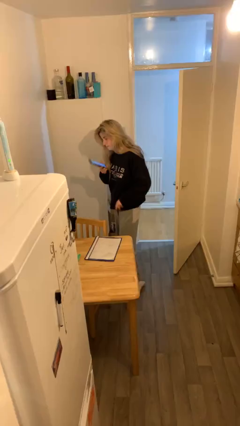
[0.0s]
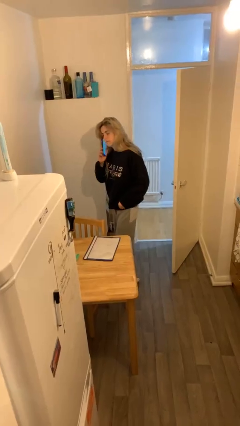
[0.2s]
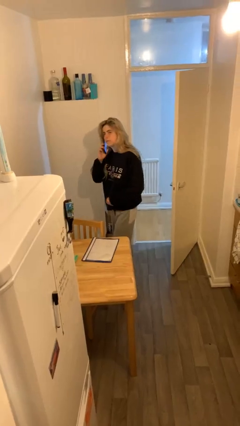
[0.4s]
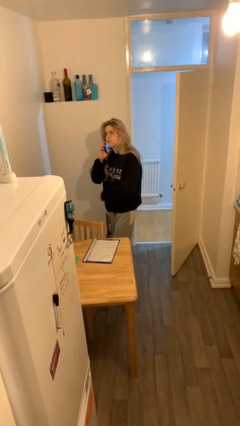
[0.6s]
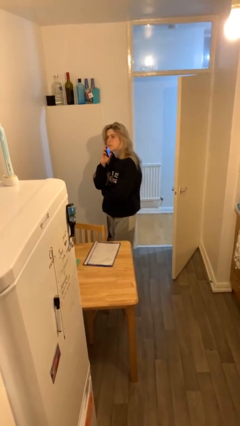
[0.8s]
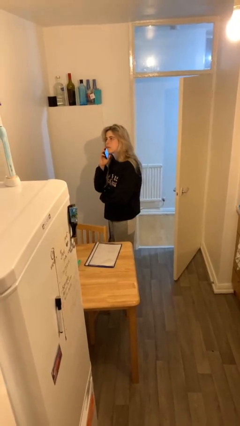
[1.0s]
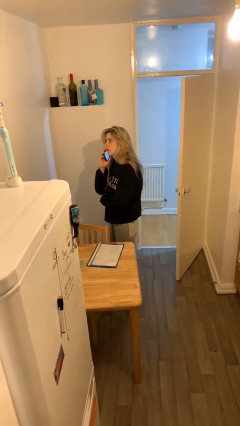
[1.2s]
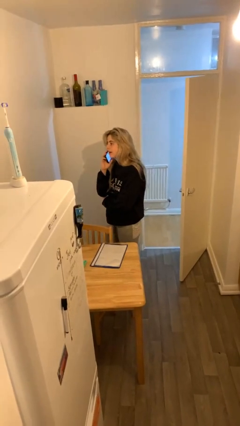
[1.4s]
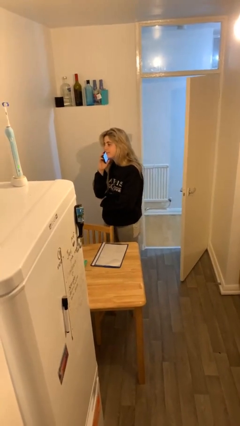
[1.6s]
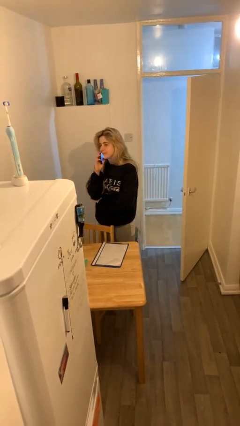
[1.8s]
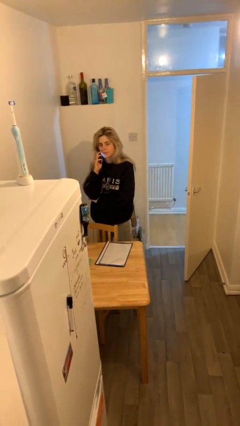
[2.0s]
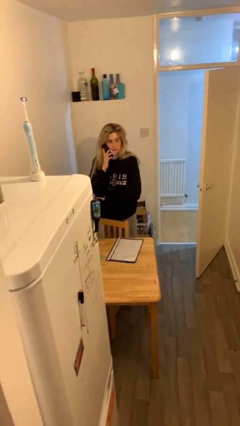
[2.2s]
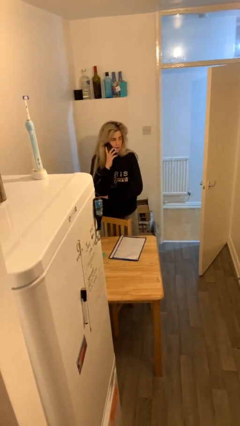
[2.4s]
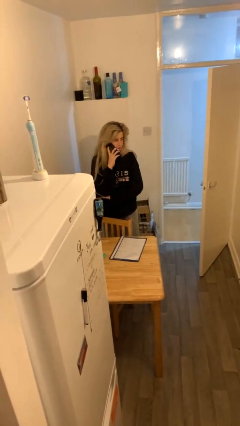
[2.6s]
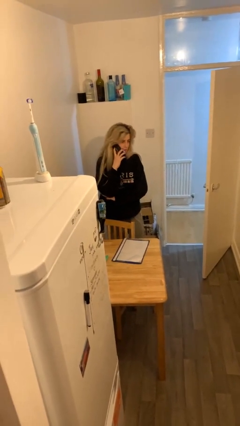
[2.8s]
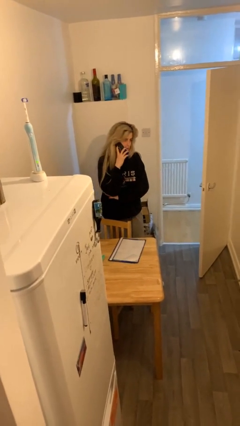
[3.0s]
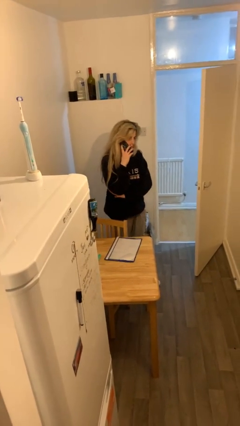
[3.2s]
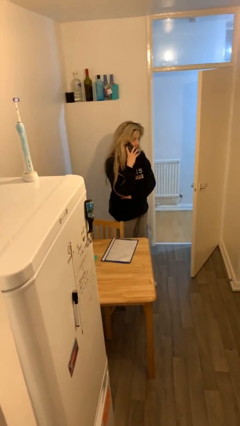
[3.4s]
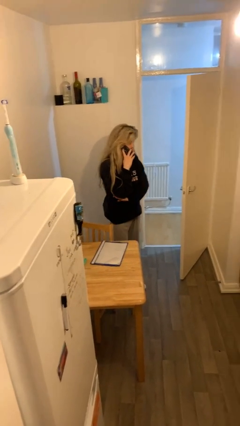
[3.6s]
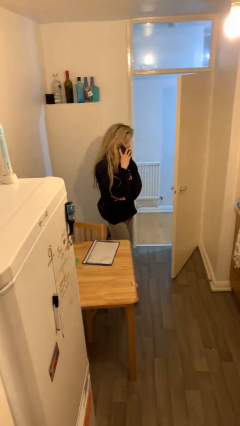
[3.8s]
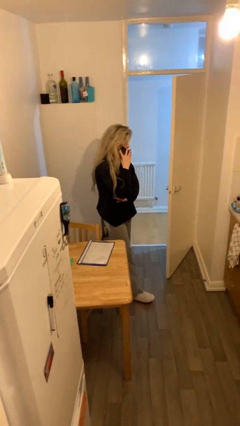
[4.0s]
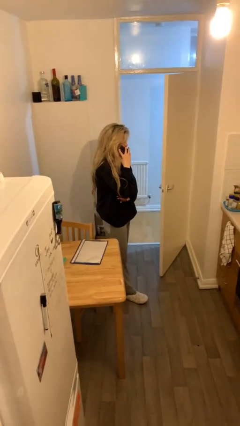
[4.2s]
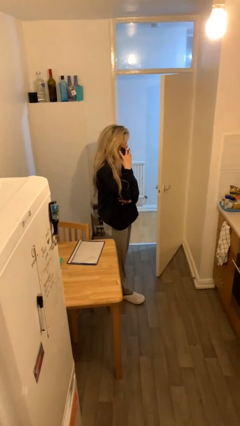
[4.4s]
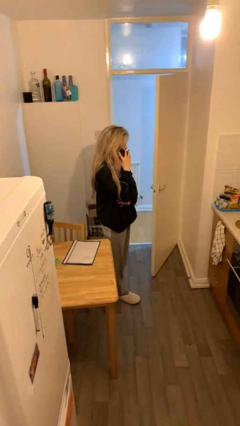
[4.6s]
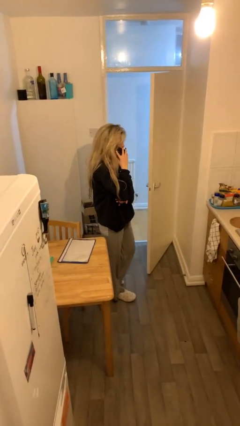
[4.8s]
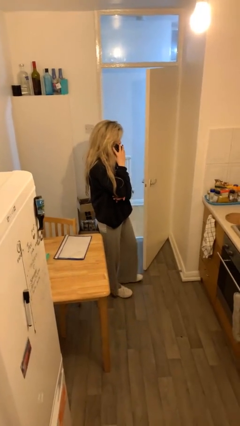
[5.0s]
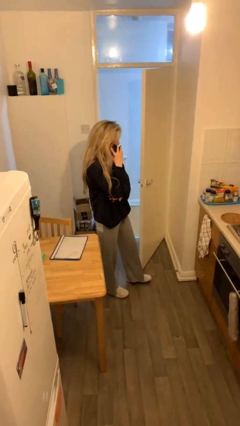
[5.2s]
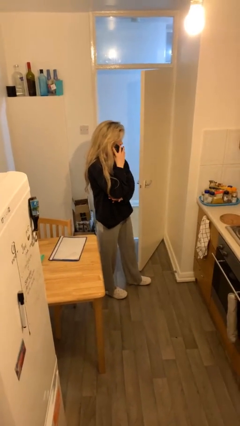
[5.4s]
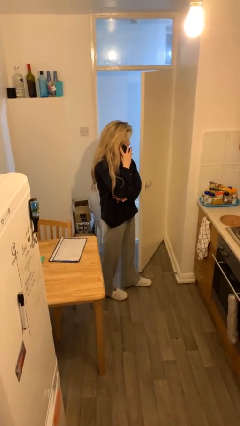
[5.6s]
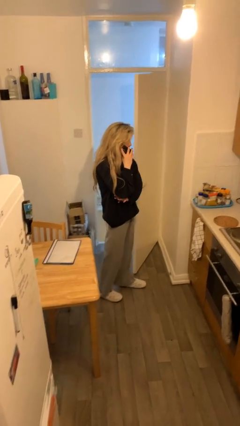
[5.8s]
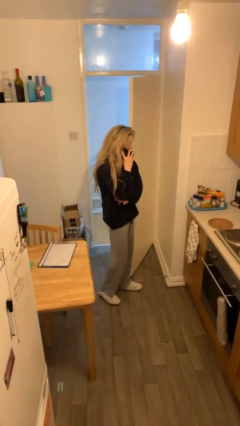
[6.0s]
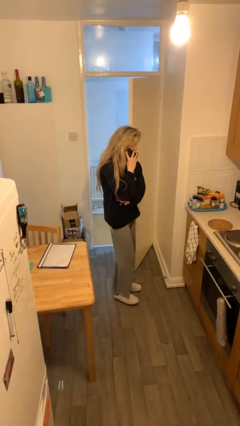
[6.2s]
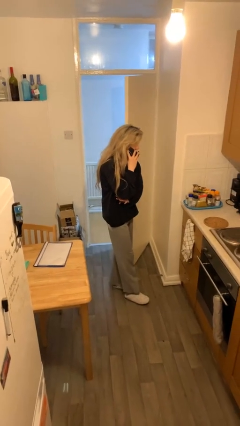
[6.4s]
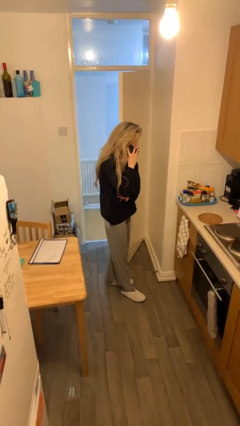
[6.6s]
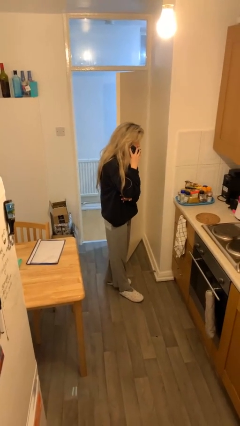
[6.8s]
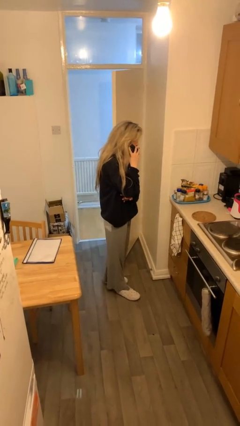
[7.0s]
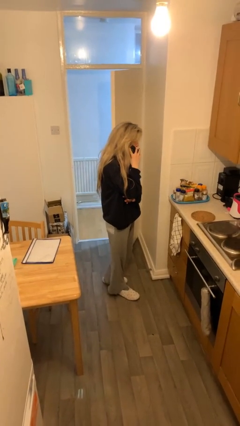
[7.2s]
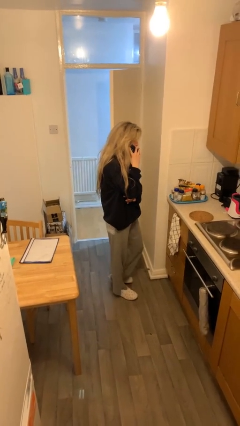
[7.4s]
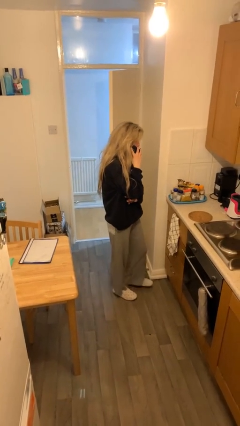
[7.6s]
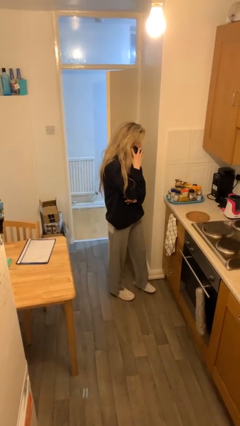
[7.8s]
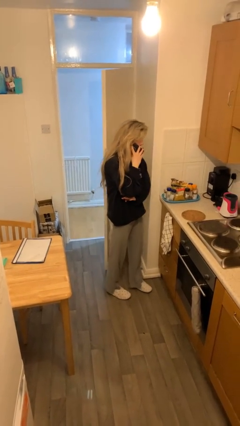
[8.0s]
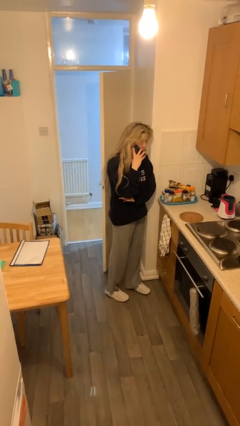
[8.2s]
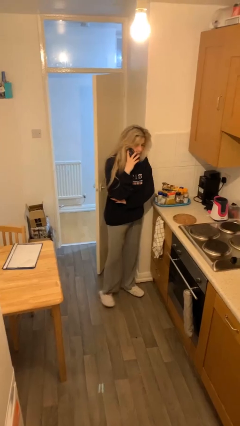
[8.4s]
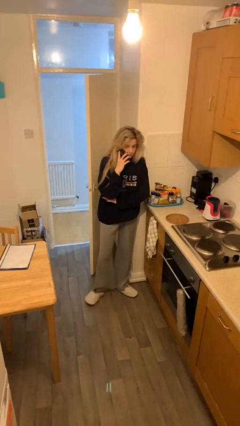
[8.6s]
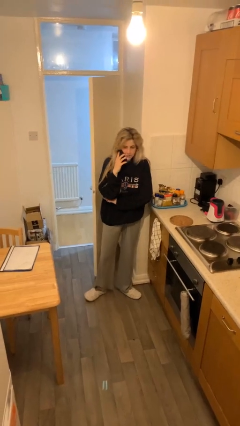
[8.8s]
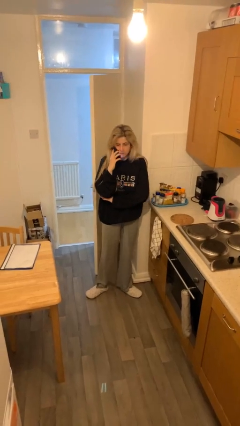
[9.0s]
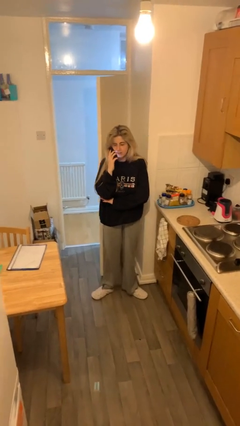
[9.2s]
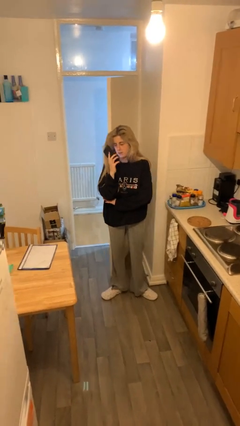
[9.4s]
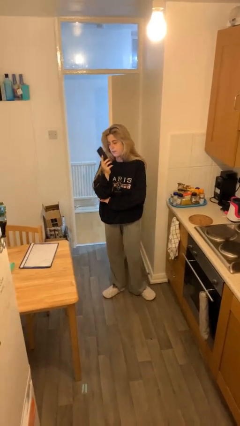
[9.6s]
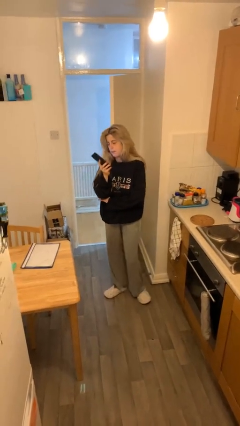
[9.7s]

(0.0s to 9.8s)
person talks on phone

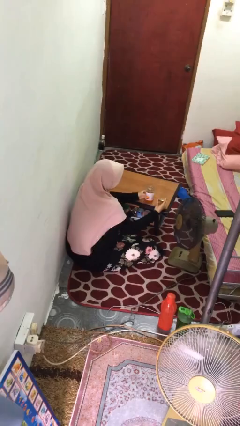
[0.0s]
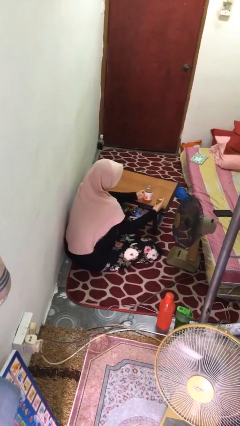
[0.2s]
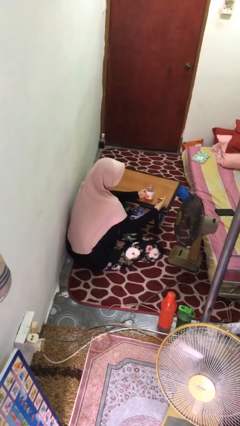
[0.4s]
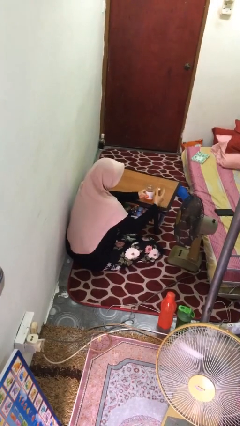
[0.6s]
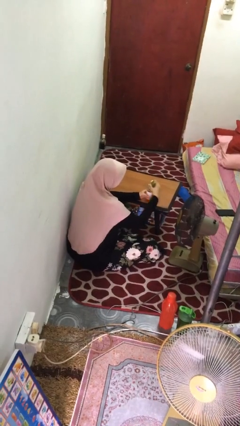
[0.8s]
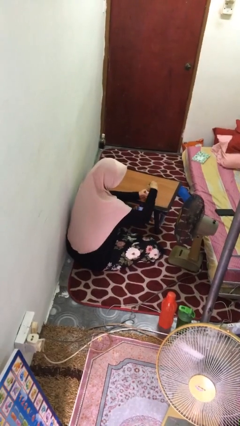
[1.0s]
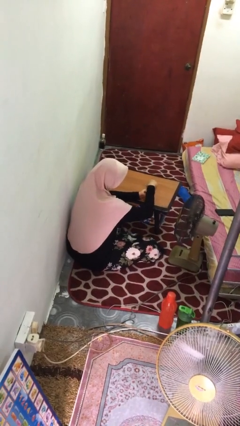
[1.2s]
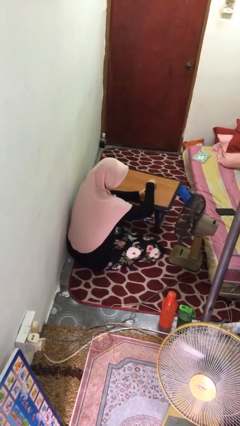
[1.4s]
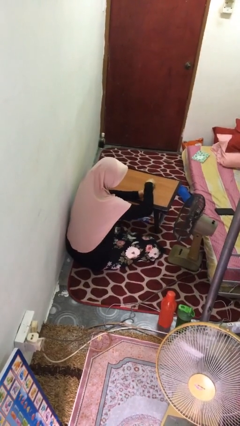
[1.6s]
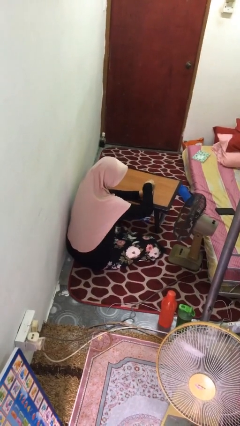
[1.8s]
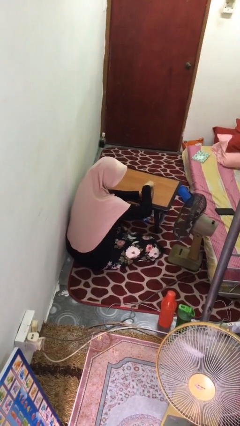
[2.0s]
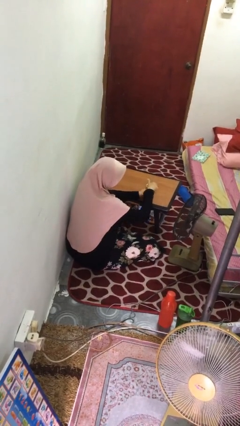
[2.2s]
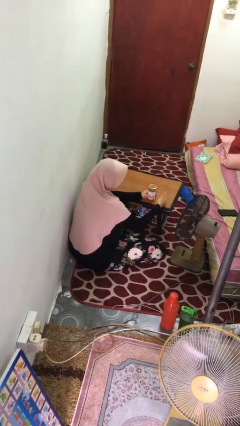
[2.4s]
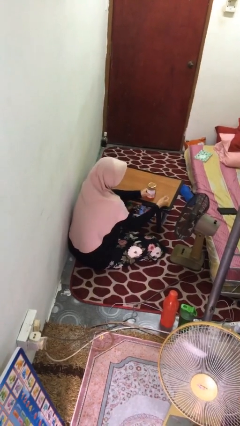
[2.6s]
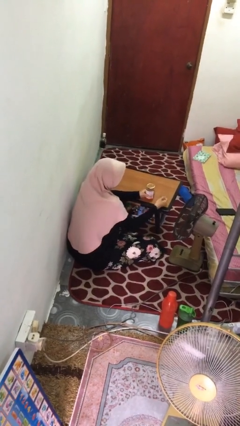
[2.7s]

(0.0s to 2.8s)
person closes jar

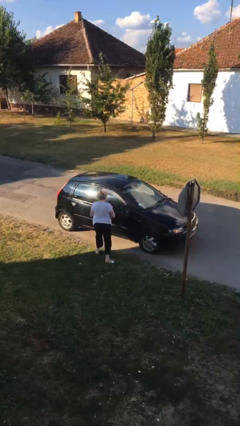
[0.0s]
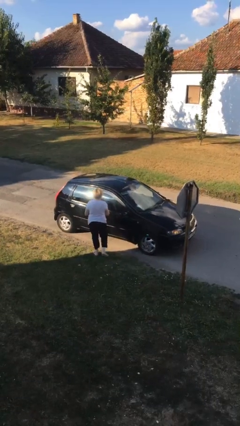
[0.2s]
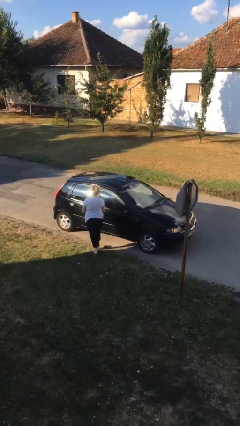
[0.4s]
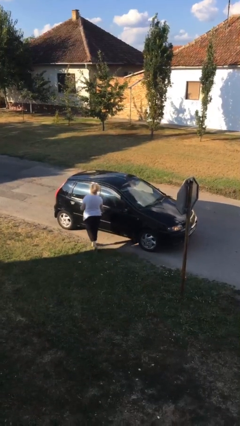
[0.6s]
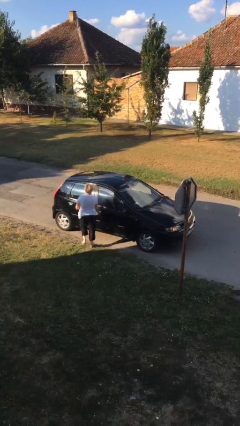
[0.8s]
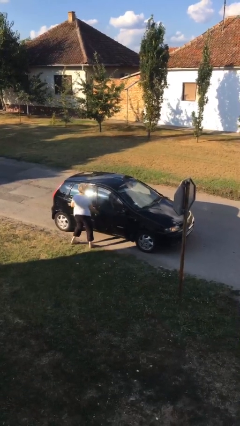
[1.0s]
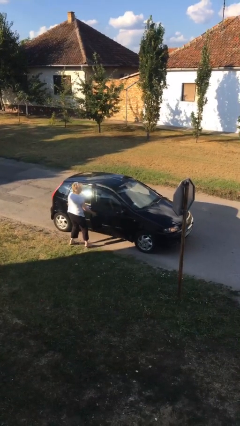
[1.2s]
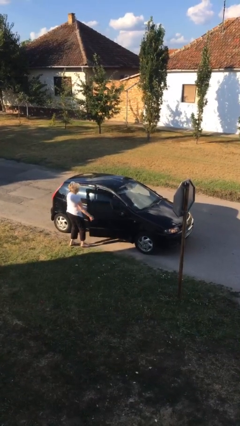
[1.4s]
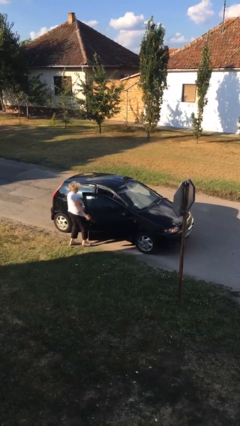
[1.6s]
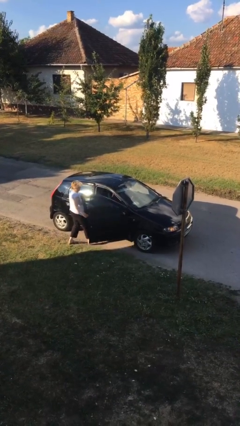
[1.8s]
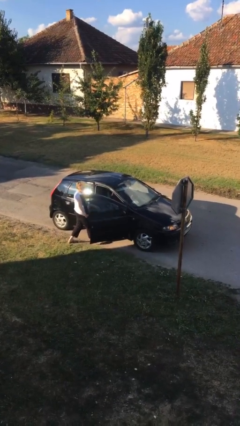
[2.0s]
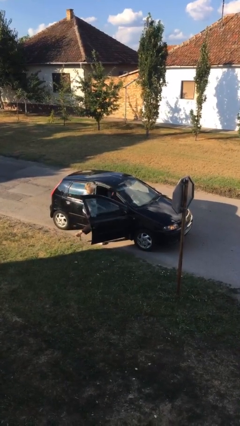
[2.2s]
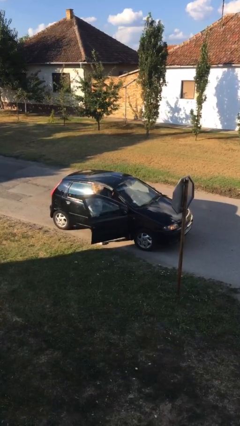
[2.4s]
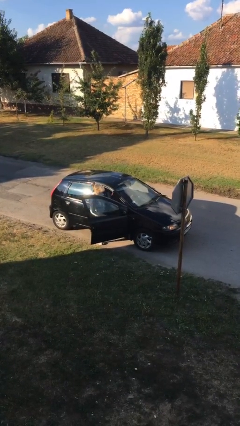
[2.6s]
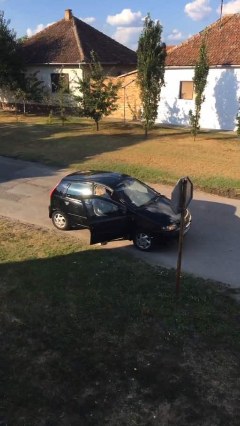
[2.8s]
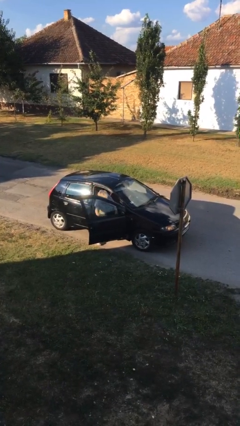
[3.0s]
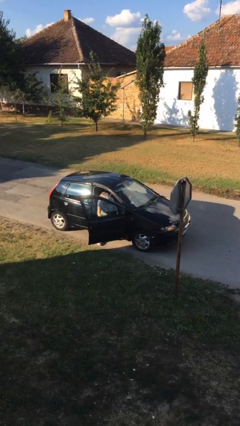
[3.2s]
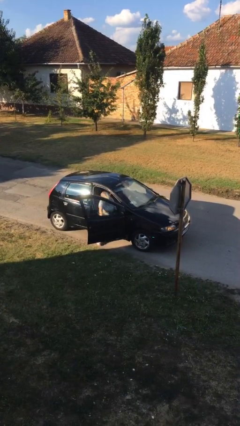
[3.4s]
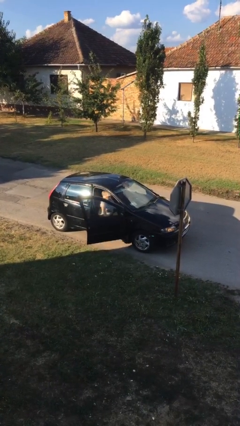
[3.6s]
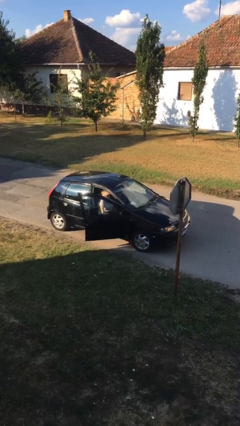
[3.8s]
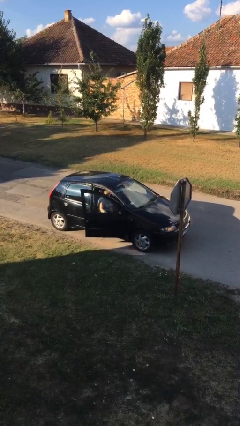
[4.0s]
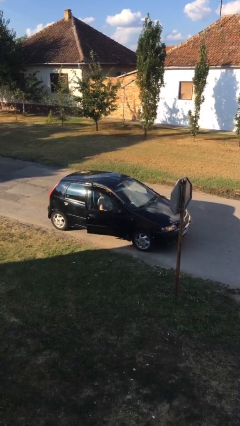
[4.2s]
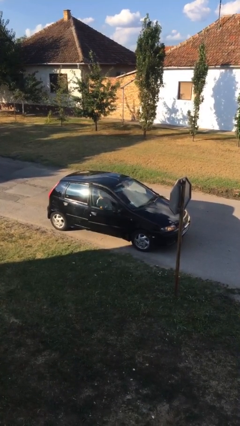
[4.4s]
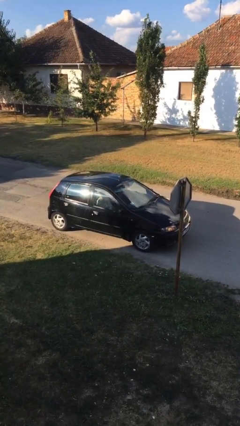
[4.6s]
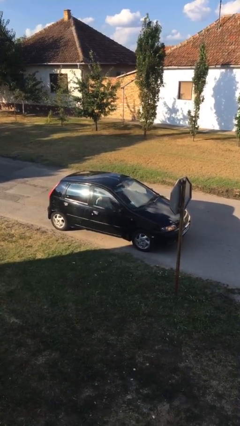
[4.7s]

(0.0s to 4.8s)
car picks up person

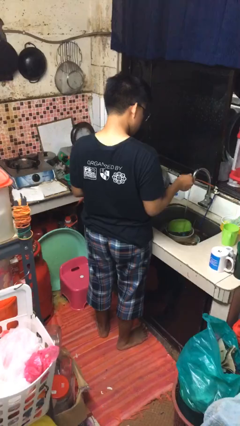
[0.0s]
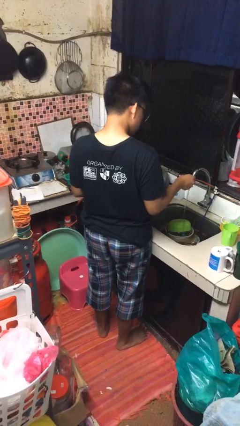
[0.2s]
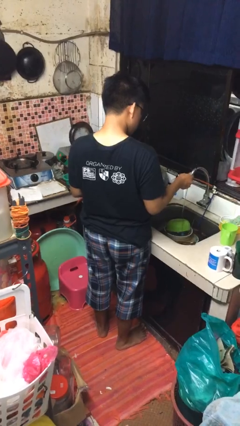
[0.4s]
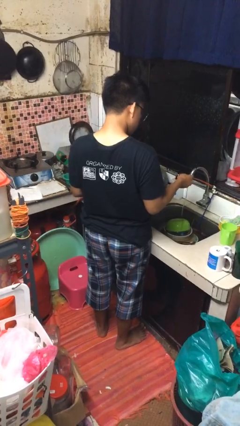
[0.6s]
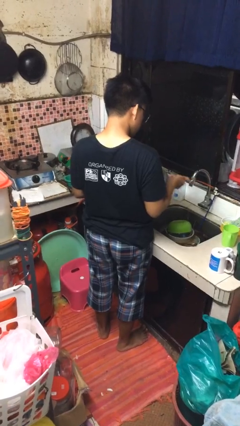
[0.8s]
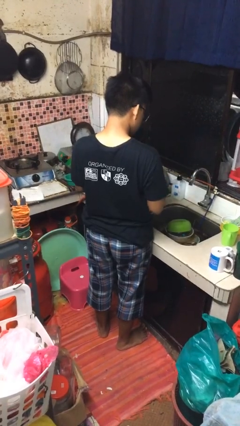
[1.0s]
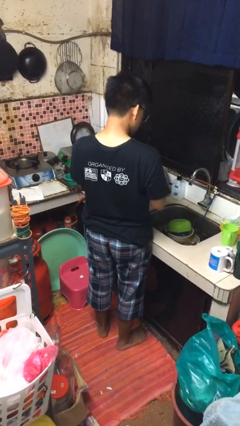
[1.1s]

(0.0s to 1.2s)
person turns off faucet
